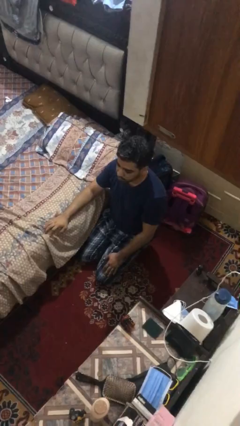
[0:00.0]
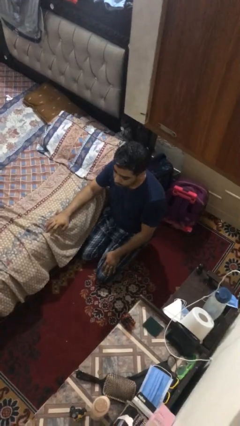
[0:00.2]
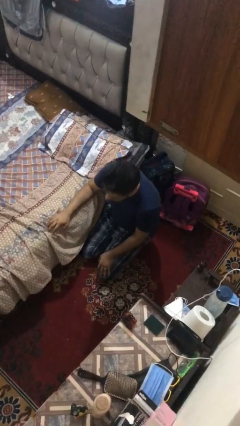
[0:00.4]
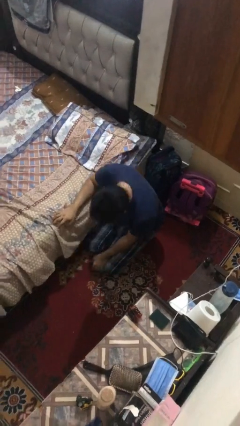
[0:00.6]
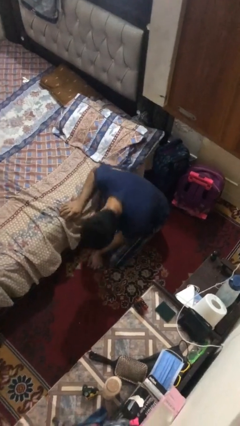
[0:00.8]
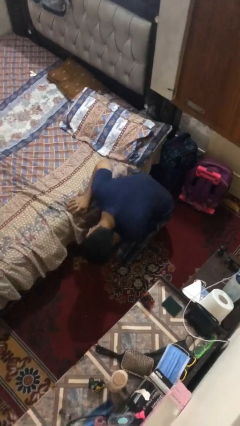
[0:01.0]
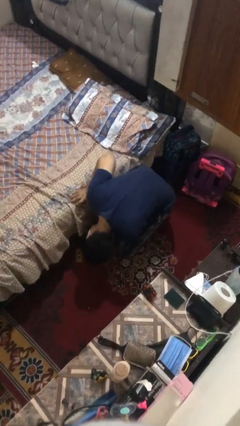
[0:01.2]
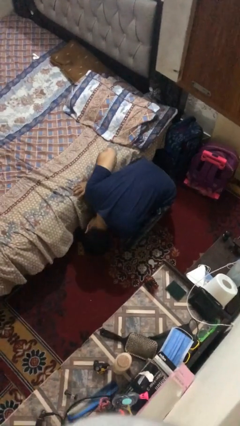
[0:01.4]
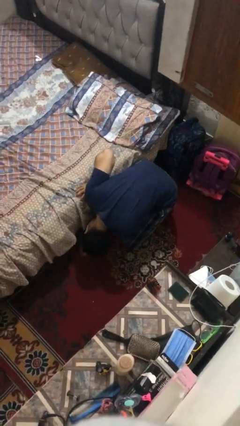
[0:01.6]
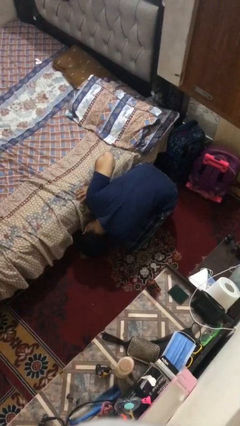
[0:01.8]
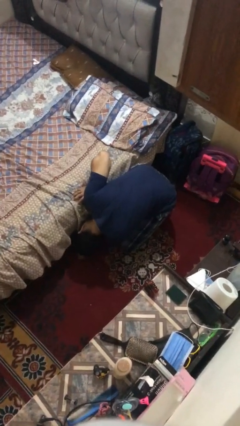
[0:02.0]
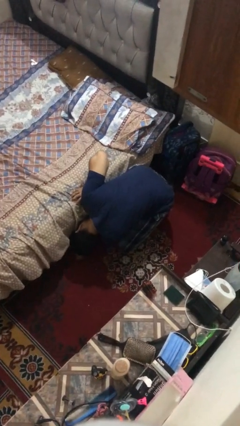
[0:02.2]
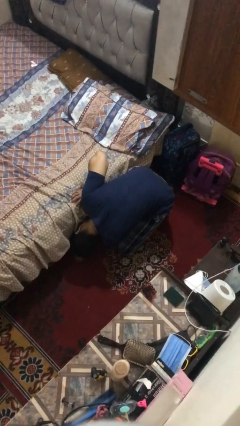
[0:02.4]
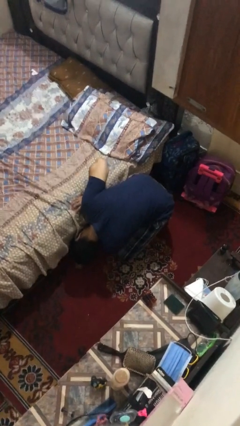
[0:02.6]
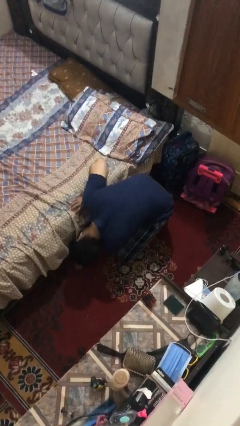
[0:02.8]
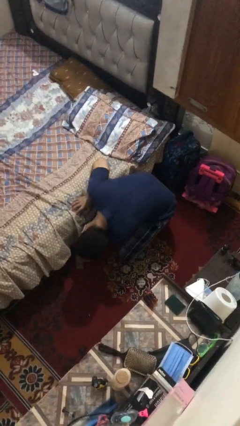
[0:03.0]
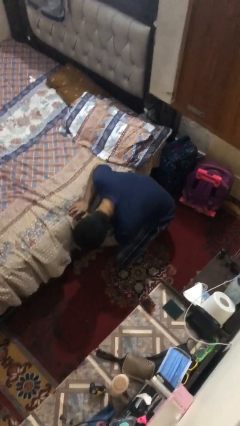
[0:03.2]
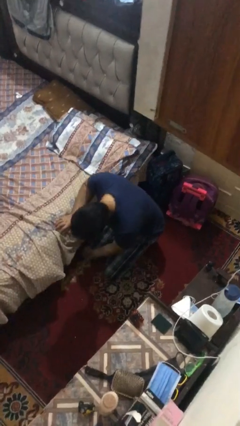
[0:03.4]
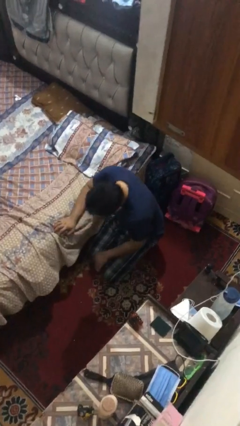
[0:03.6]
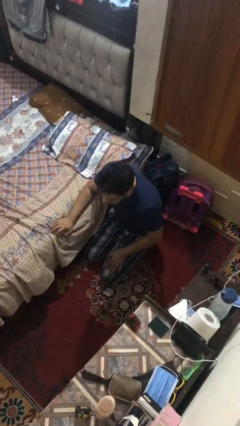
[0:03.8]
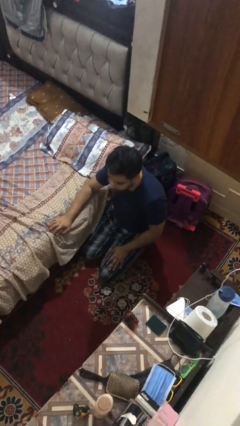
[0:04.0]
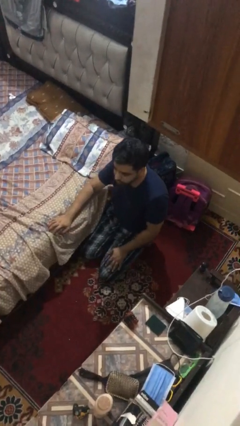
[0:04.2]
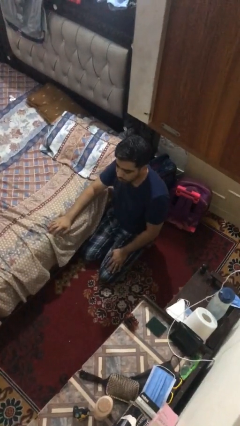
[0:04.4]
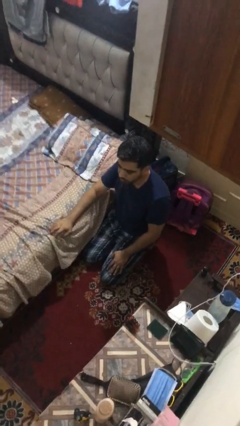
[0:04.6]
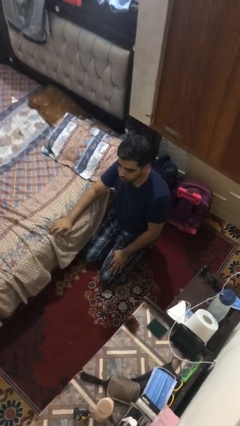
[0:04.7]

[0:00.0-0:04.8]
person searches under bed

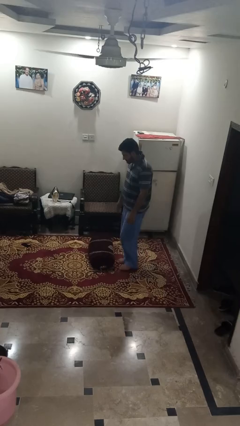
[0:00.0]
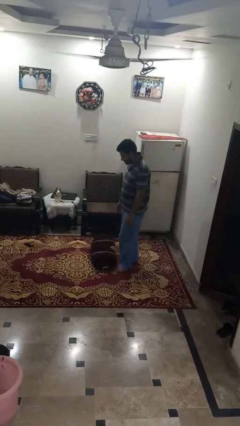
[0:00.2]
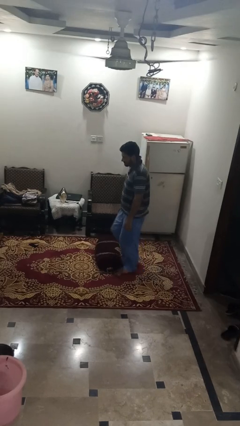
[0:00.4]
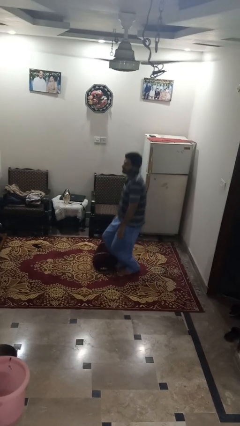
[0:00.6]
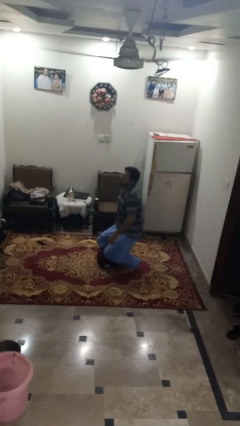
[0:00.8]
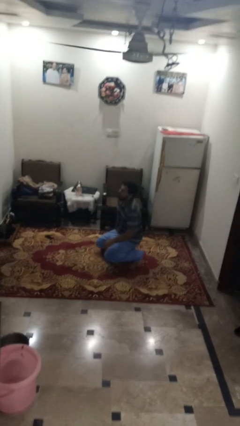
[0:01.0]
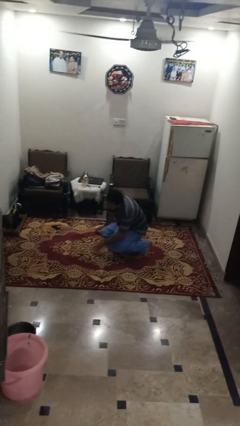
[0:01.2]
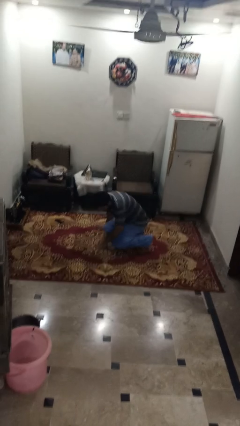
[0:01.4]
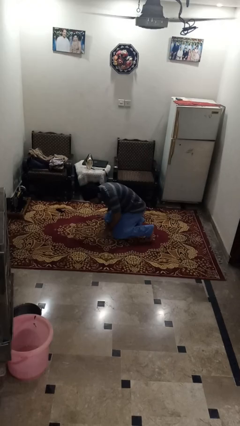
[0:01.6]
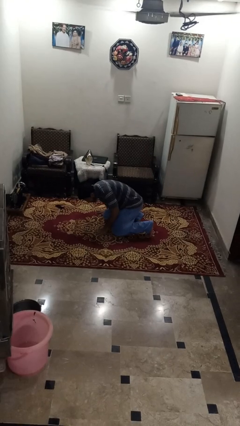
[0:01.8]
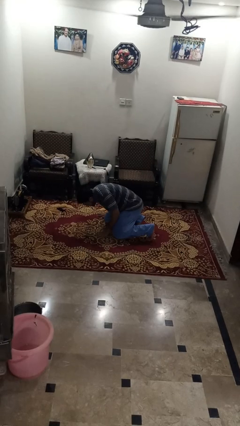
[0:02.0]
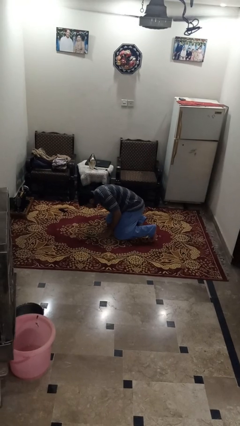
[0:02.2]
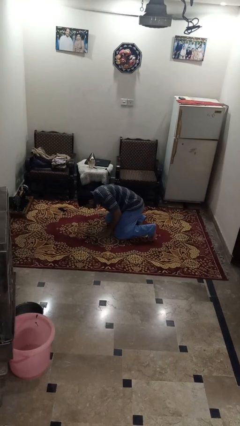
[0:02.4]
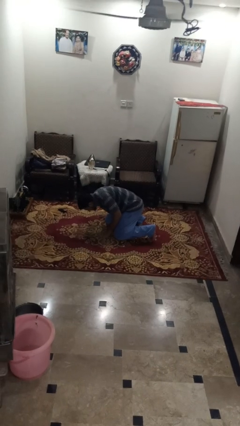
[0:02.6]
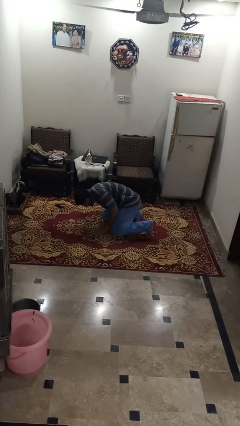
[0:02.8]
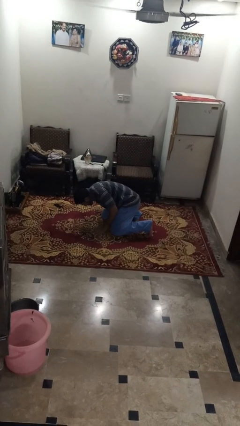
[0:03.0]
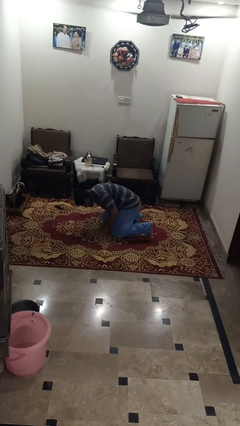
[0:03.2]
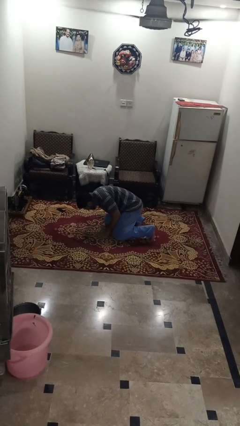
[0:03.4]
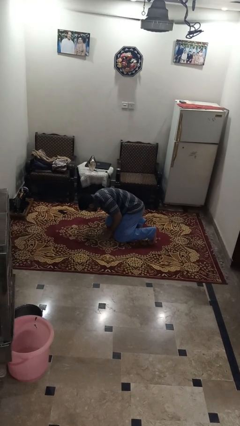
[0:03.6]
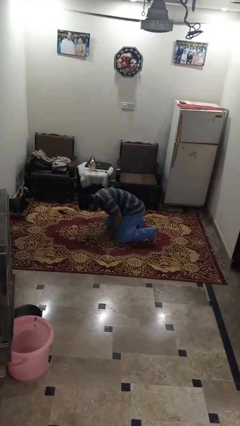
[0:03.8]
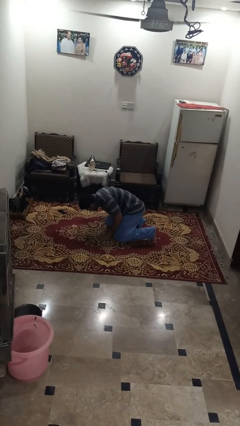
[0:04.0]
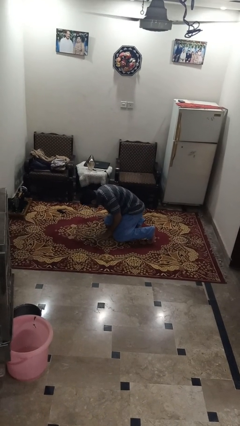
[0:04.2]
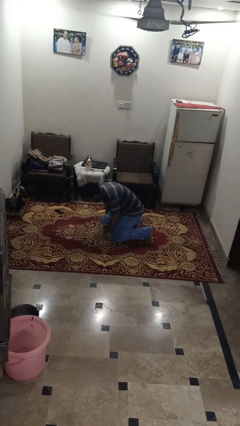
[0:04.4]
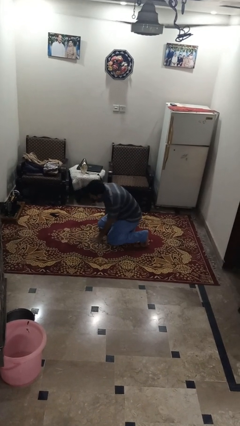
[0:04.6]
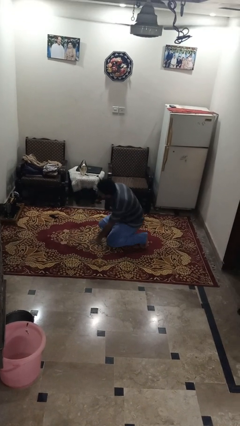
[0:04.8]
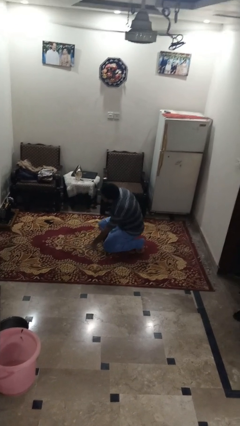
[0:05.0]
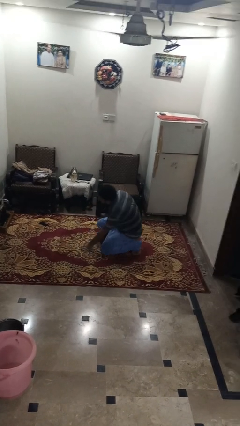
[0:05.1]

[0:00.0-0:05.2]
person trips on object on floor

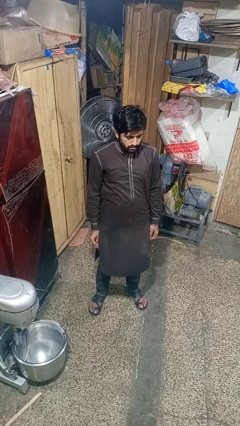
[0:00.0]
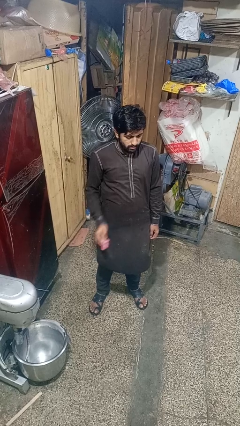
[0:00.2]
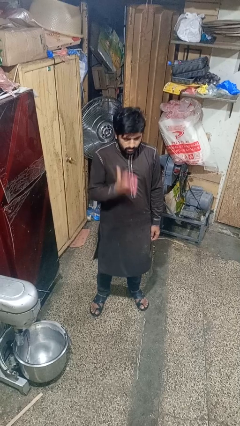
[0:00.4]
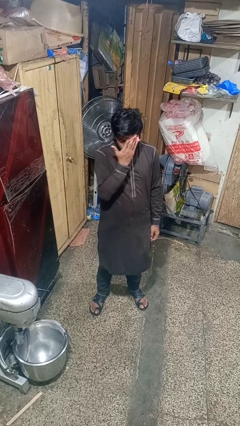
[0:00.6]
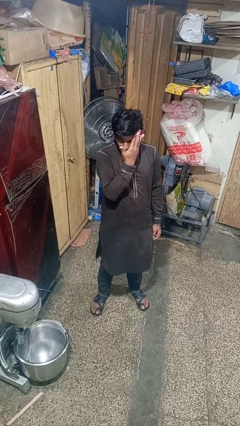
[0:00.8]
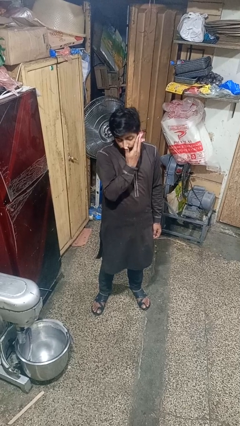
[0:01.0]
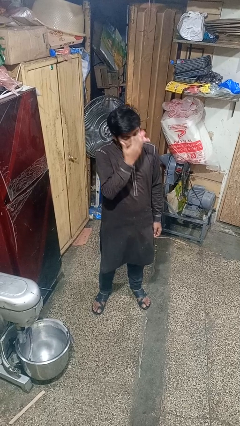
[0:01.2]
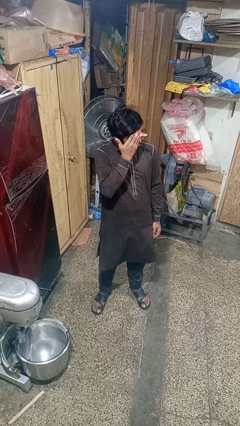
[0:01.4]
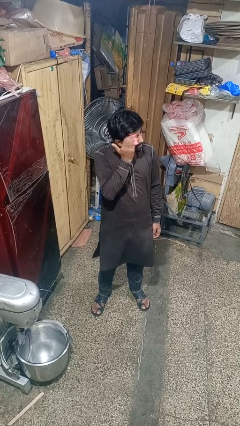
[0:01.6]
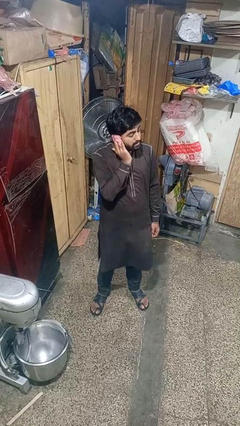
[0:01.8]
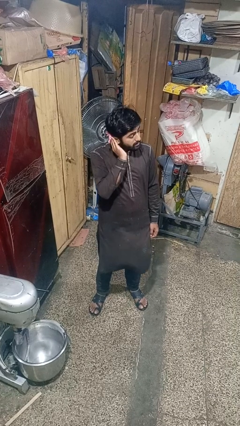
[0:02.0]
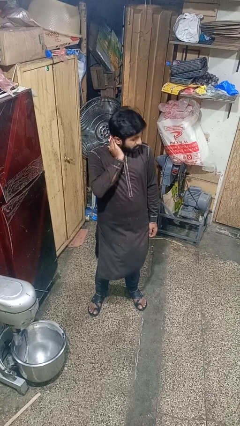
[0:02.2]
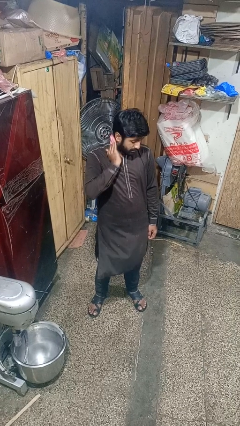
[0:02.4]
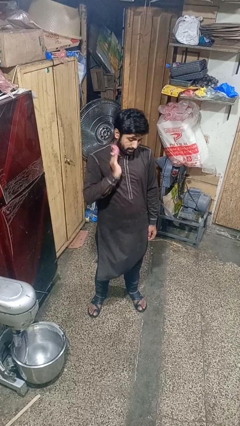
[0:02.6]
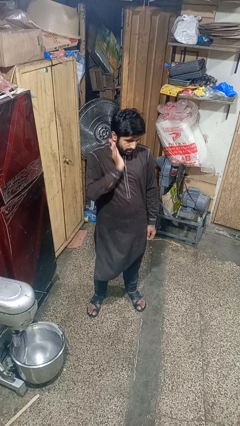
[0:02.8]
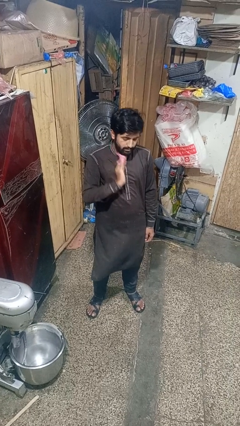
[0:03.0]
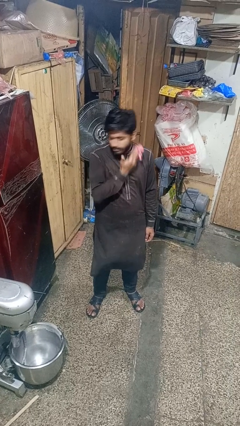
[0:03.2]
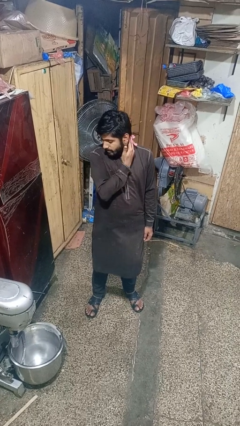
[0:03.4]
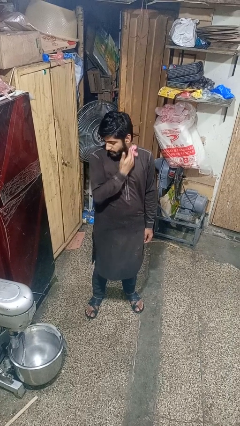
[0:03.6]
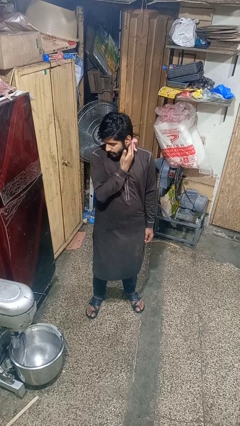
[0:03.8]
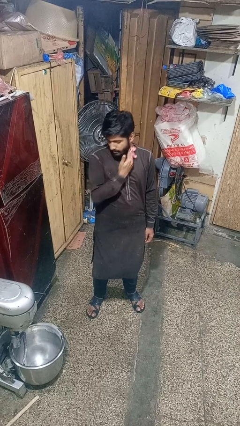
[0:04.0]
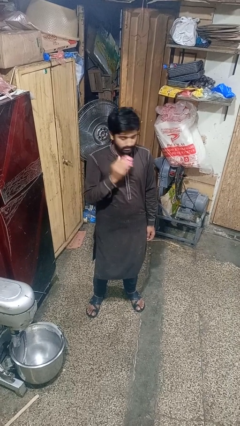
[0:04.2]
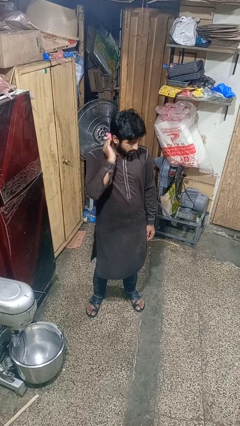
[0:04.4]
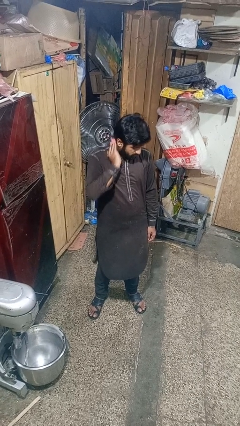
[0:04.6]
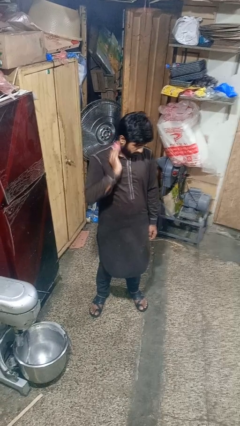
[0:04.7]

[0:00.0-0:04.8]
person wipes mouth with napkin

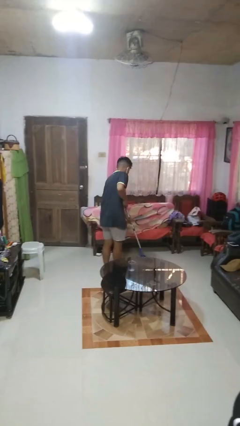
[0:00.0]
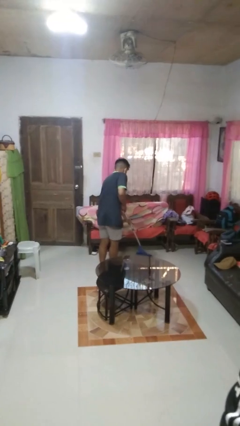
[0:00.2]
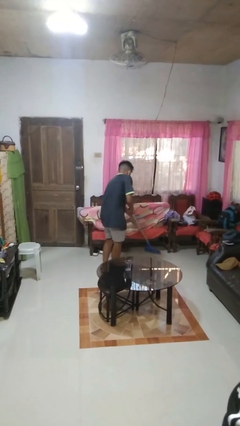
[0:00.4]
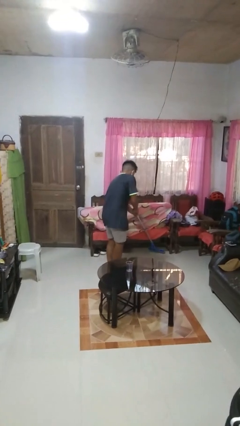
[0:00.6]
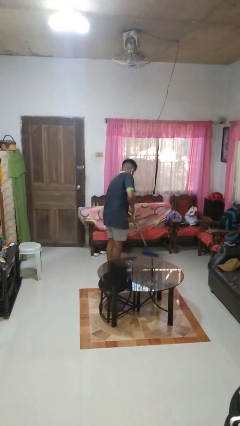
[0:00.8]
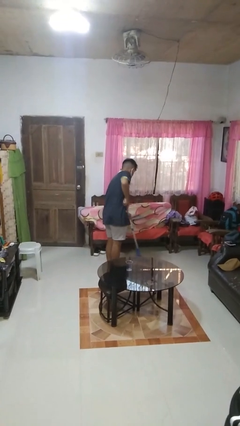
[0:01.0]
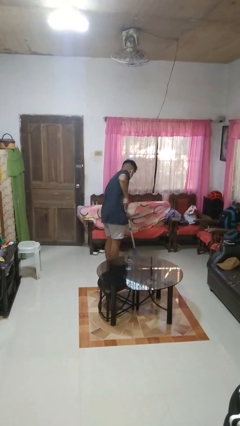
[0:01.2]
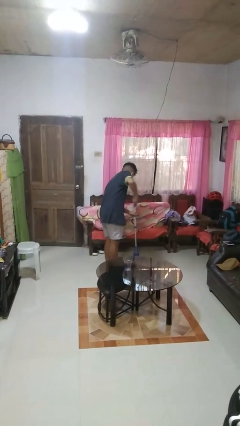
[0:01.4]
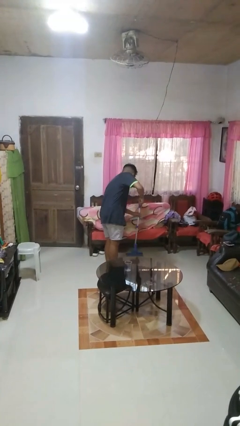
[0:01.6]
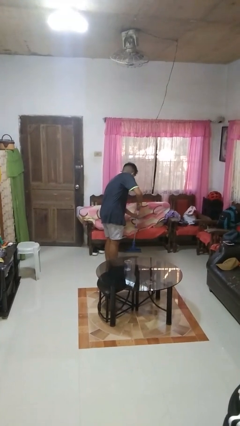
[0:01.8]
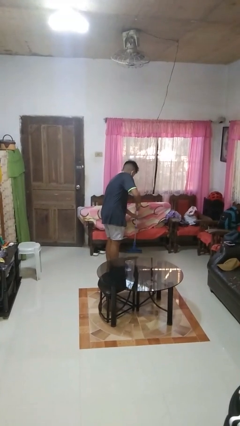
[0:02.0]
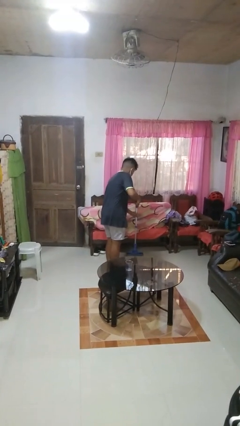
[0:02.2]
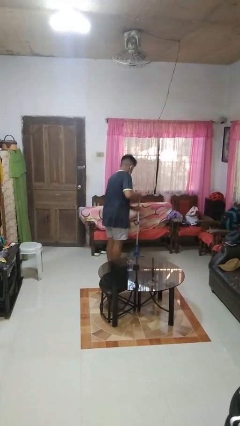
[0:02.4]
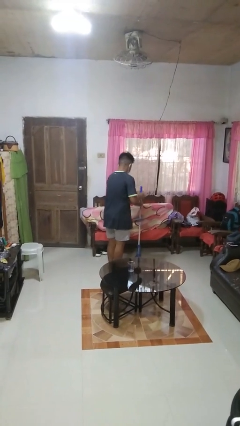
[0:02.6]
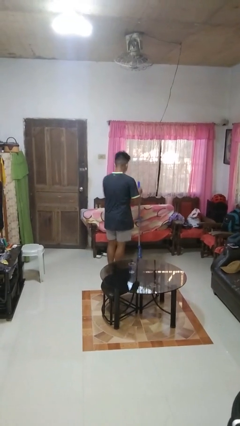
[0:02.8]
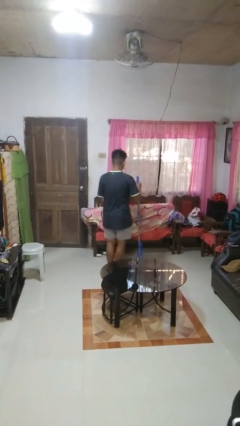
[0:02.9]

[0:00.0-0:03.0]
person mops
